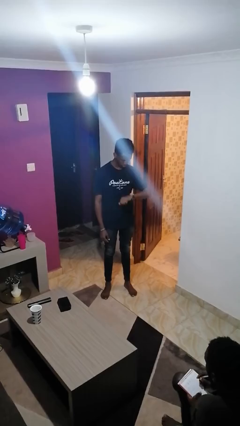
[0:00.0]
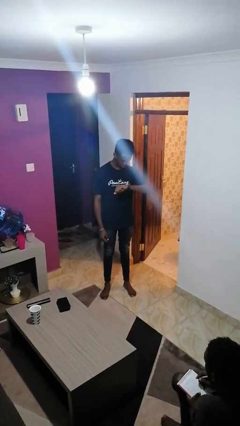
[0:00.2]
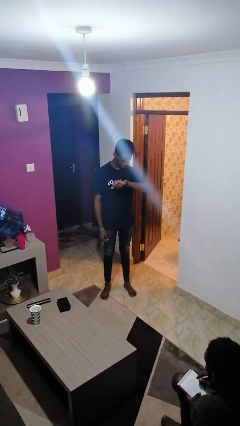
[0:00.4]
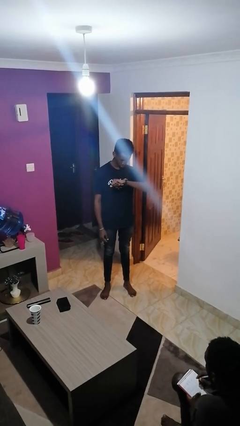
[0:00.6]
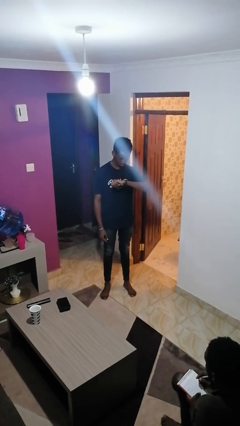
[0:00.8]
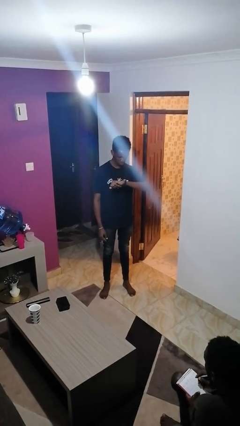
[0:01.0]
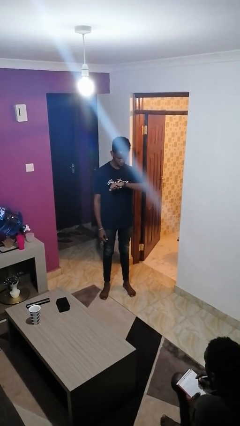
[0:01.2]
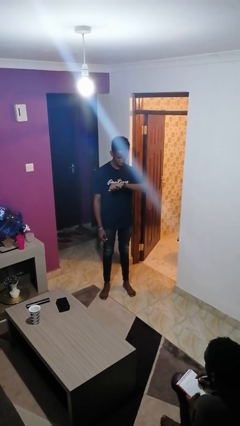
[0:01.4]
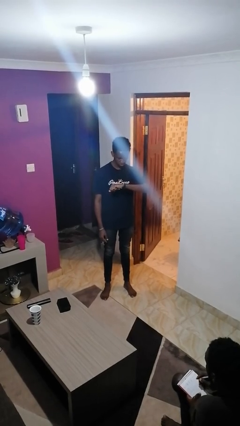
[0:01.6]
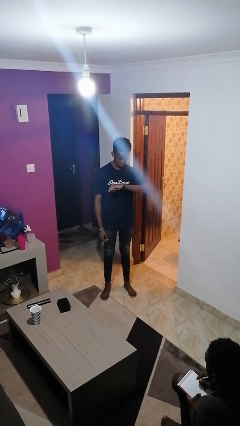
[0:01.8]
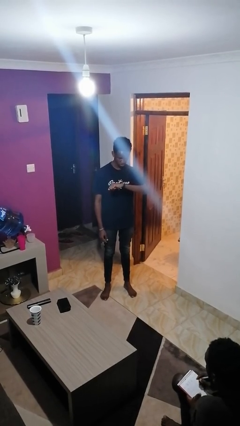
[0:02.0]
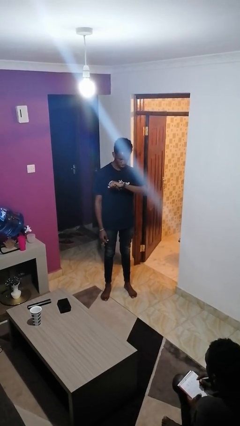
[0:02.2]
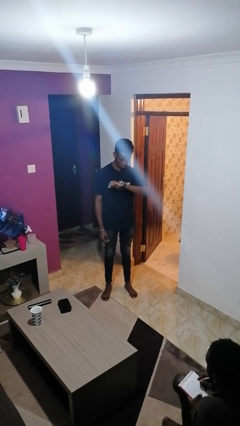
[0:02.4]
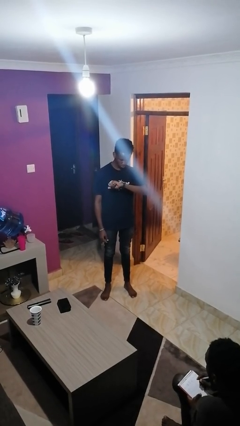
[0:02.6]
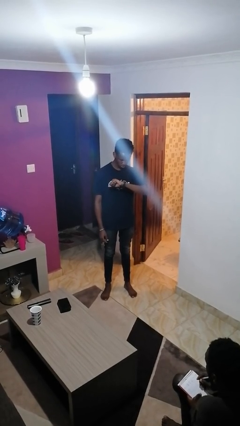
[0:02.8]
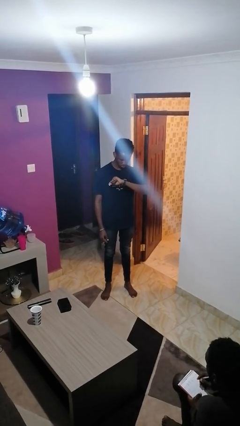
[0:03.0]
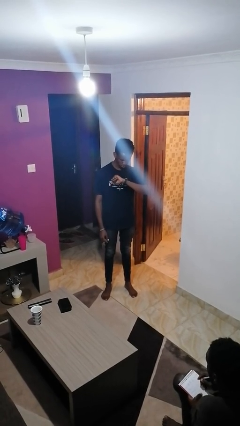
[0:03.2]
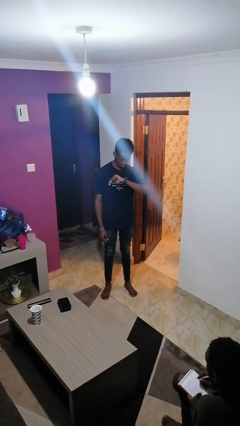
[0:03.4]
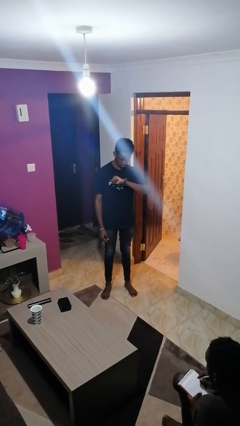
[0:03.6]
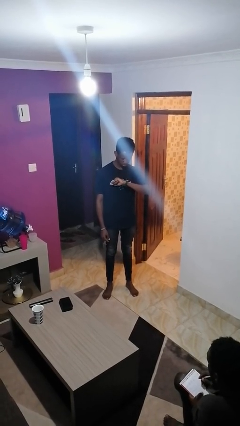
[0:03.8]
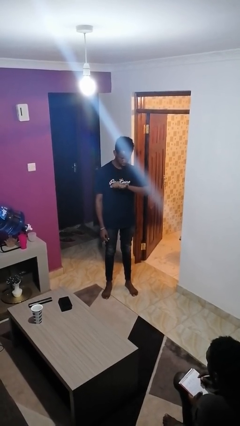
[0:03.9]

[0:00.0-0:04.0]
person looks at wristwatch

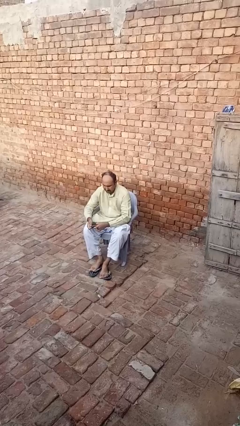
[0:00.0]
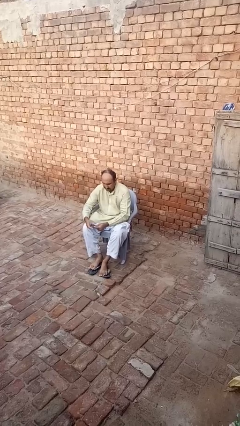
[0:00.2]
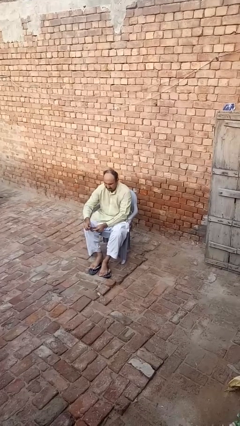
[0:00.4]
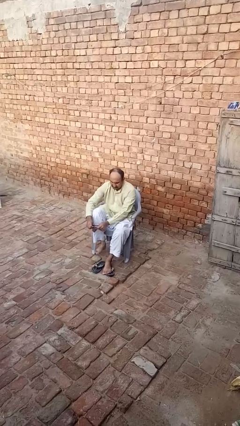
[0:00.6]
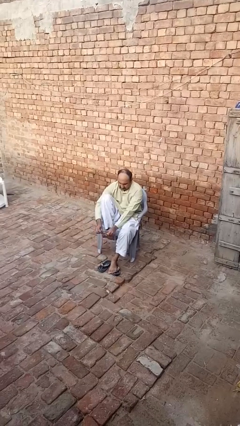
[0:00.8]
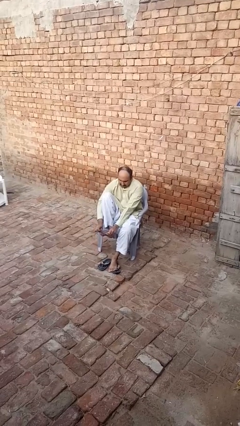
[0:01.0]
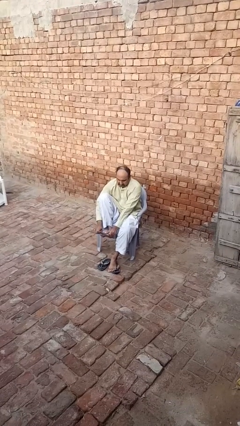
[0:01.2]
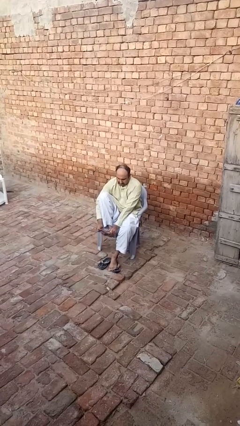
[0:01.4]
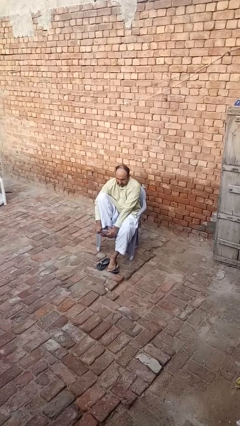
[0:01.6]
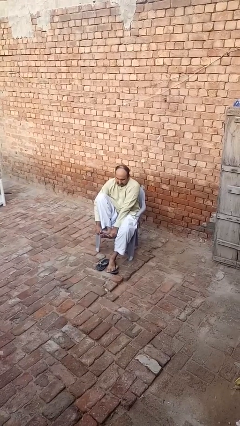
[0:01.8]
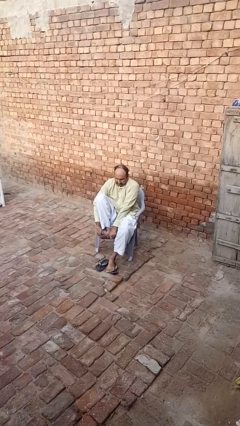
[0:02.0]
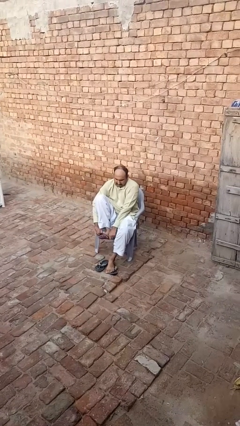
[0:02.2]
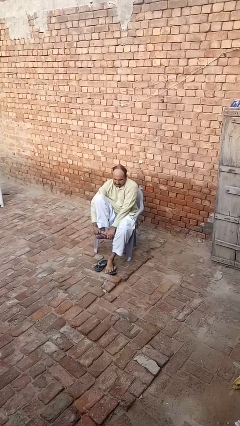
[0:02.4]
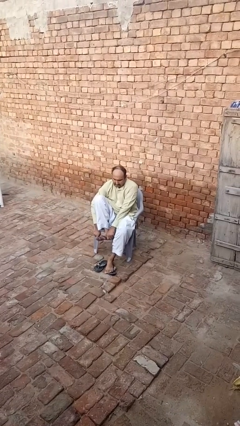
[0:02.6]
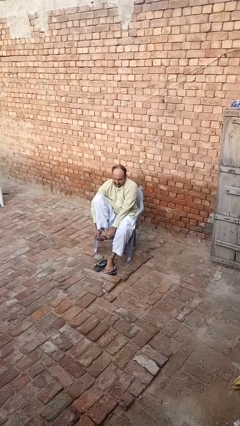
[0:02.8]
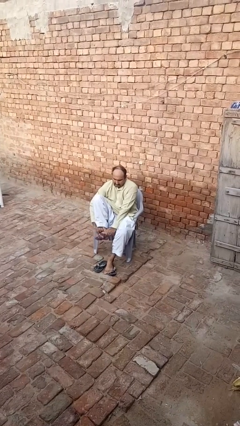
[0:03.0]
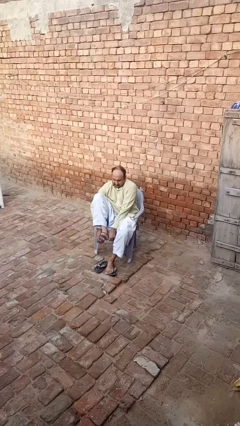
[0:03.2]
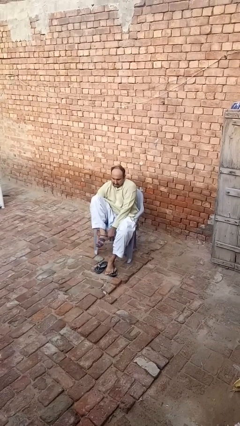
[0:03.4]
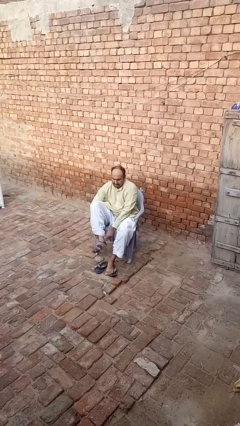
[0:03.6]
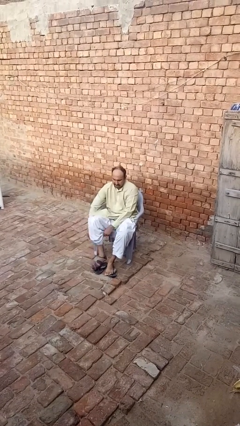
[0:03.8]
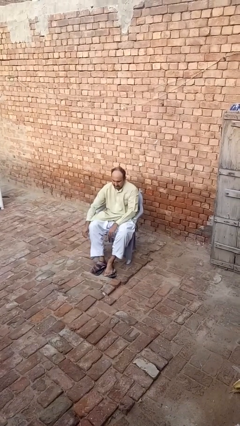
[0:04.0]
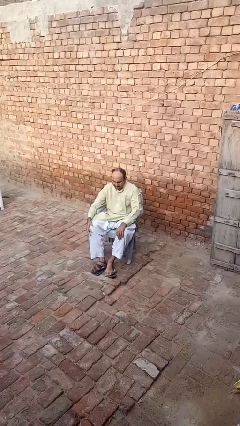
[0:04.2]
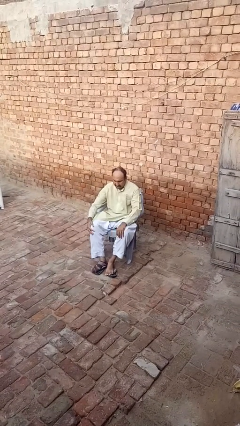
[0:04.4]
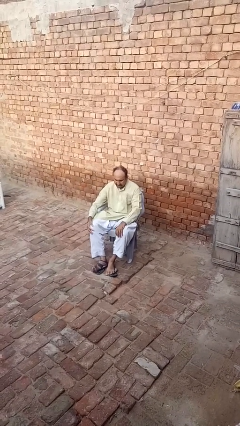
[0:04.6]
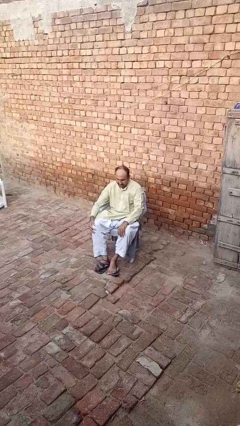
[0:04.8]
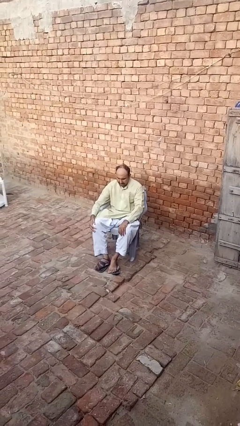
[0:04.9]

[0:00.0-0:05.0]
person puts on socks

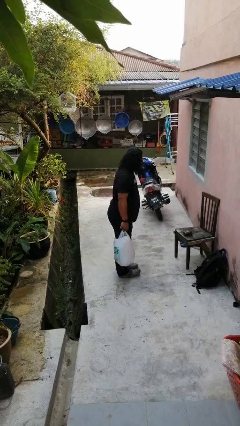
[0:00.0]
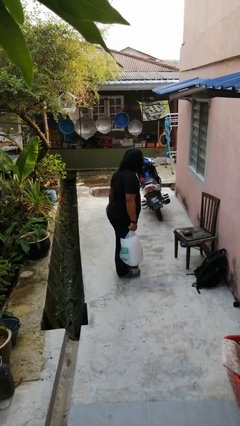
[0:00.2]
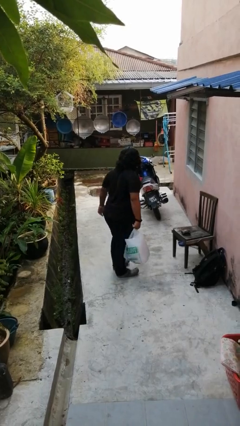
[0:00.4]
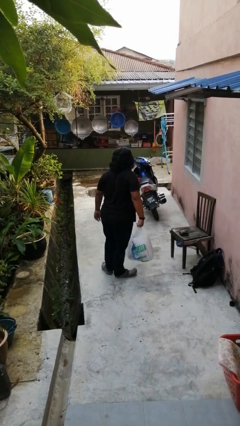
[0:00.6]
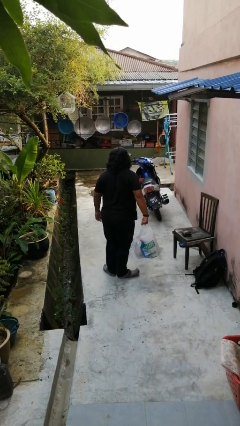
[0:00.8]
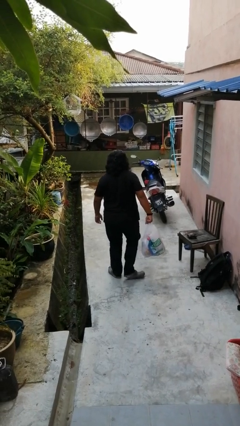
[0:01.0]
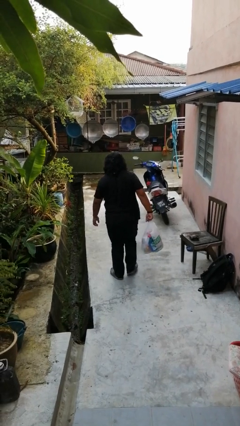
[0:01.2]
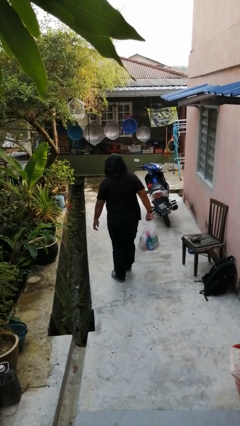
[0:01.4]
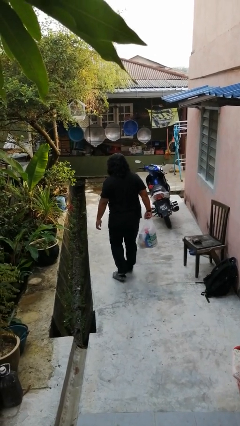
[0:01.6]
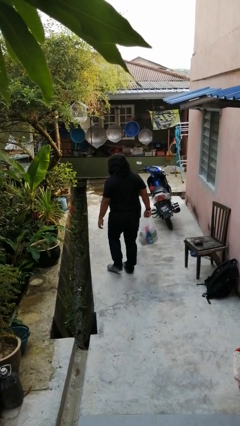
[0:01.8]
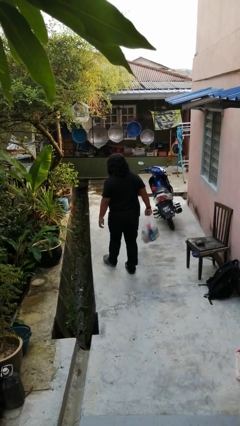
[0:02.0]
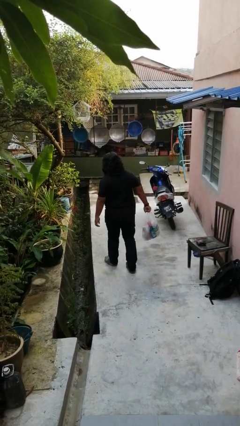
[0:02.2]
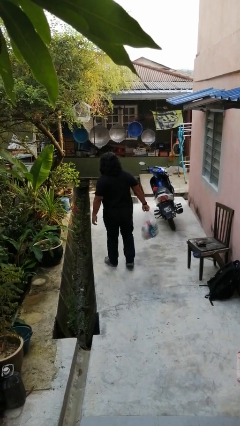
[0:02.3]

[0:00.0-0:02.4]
person carries groceries

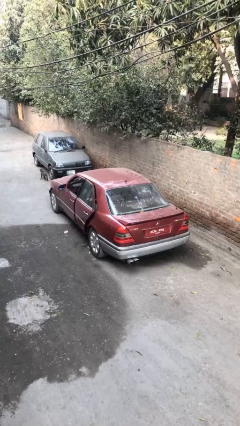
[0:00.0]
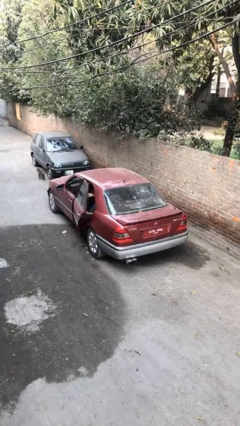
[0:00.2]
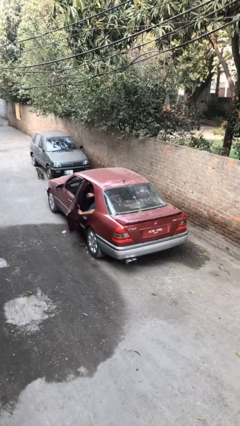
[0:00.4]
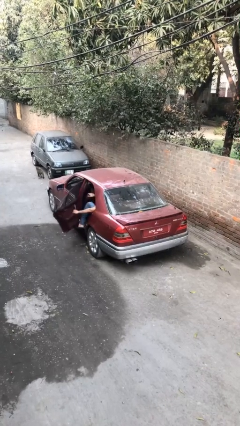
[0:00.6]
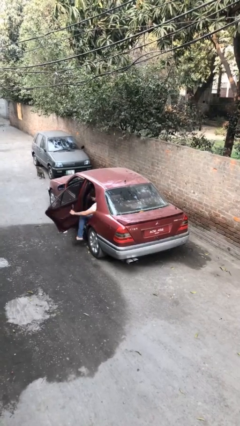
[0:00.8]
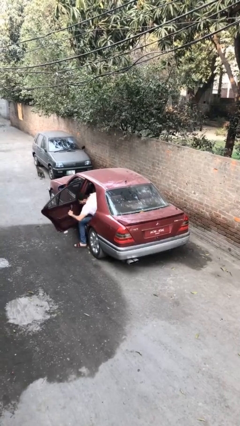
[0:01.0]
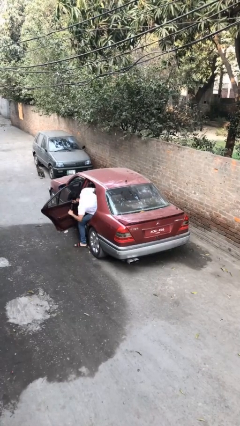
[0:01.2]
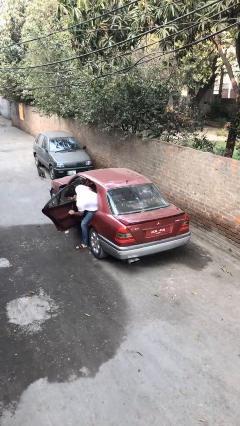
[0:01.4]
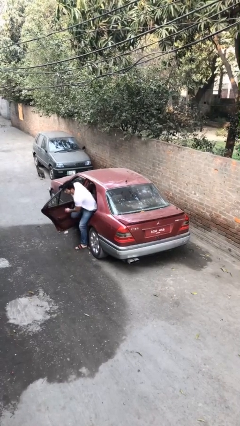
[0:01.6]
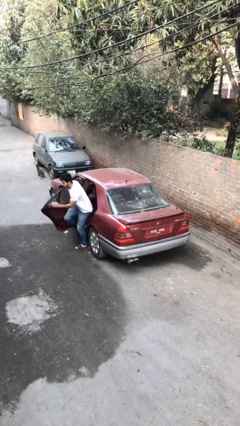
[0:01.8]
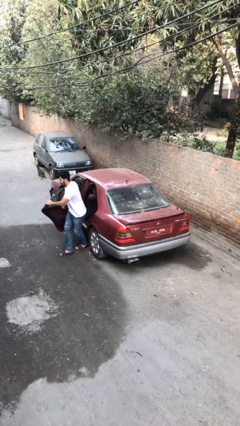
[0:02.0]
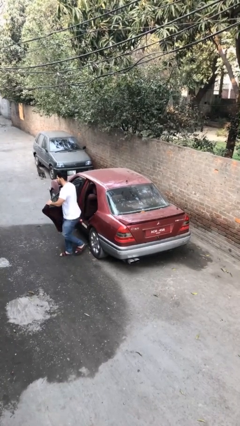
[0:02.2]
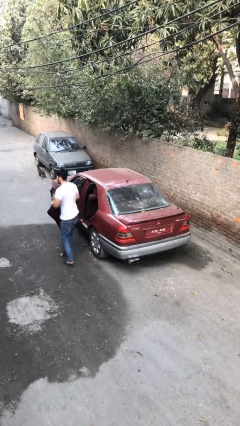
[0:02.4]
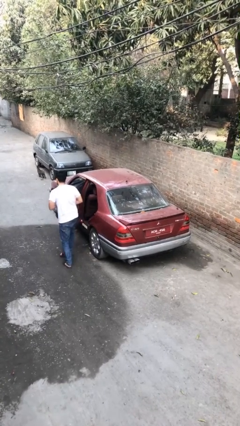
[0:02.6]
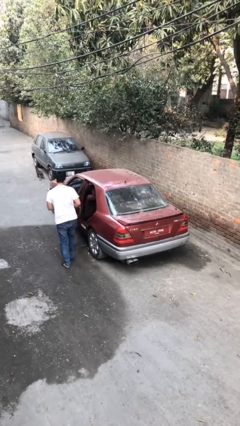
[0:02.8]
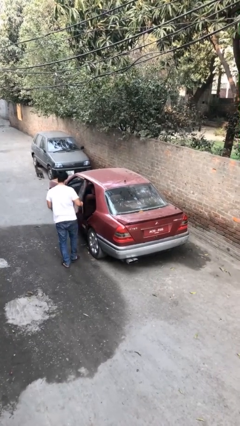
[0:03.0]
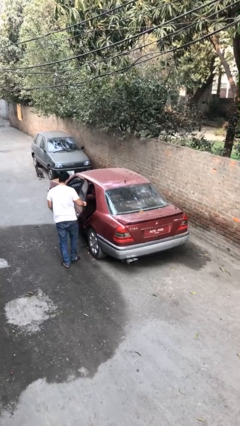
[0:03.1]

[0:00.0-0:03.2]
car drops off person

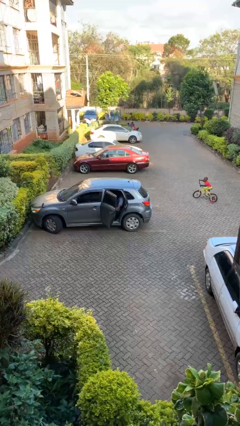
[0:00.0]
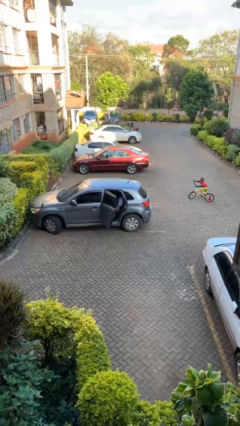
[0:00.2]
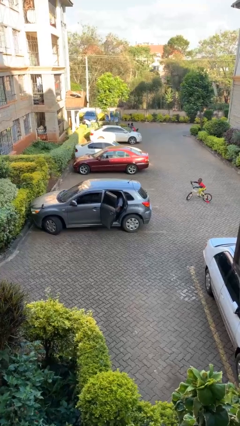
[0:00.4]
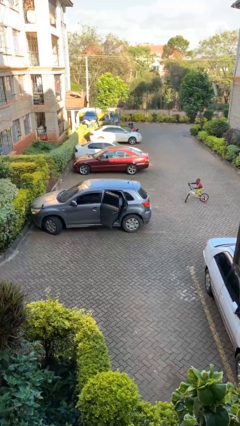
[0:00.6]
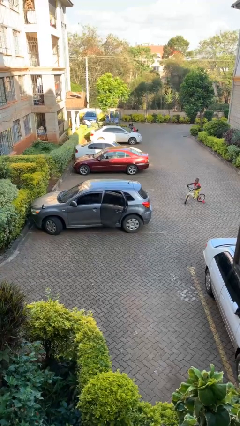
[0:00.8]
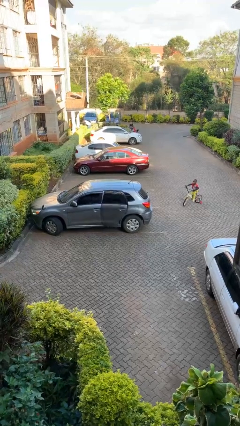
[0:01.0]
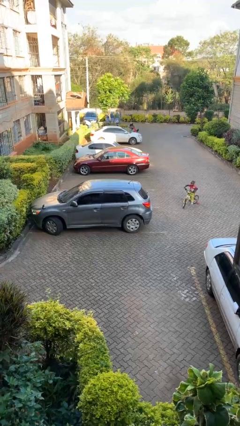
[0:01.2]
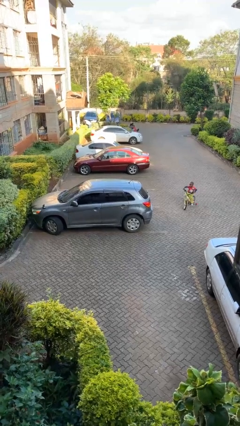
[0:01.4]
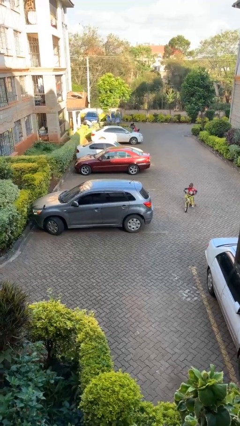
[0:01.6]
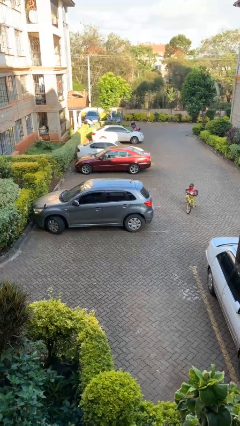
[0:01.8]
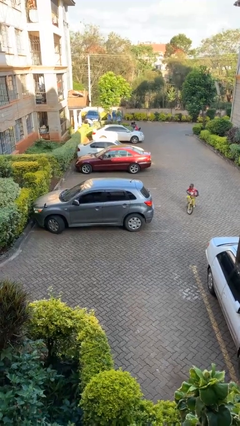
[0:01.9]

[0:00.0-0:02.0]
person closes car door

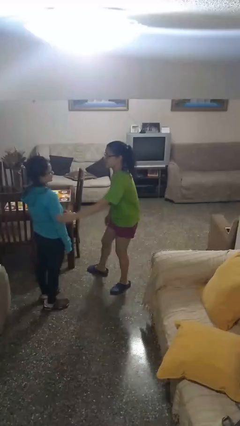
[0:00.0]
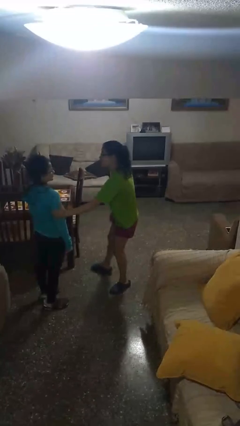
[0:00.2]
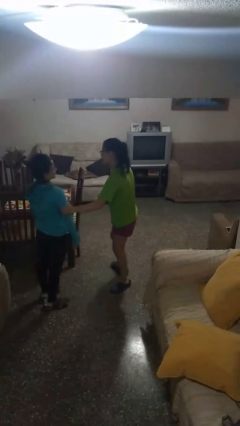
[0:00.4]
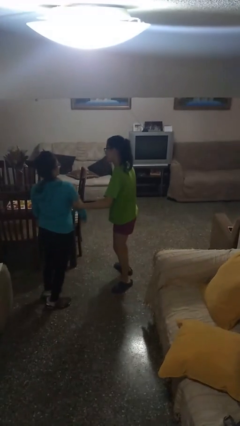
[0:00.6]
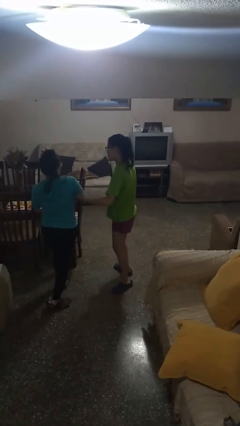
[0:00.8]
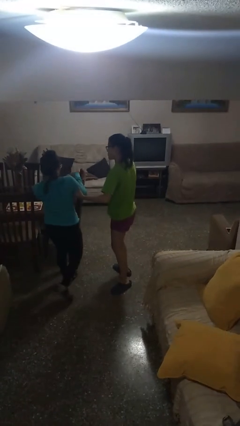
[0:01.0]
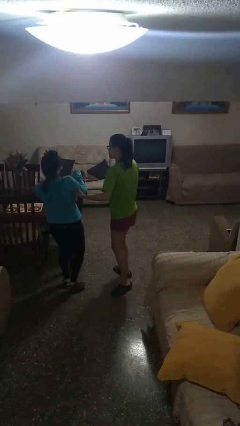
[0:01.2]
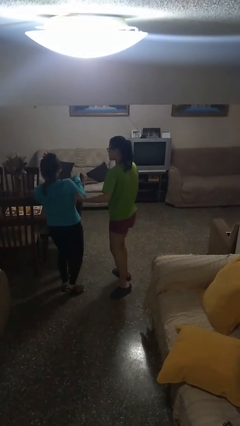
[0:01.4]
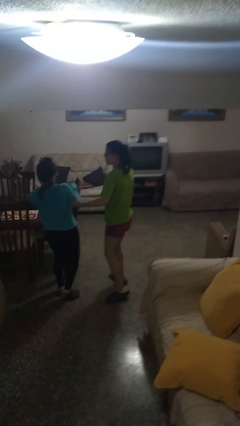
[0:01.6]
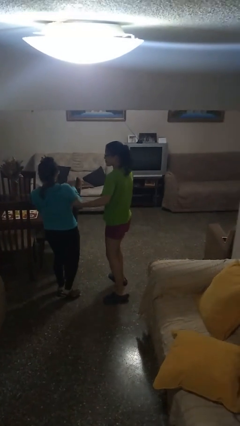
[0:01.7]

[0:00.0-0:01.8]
person grabs person by bicep
